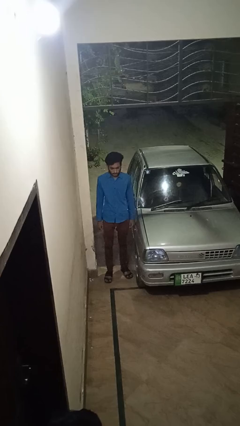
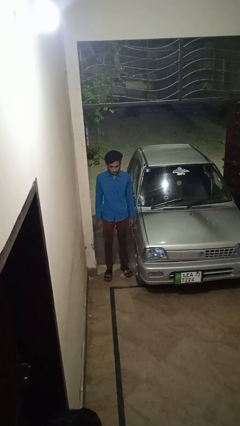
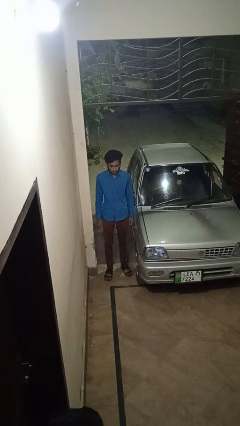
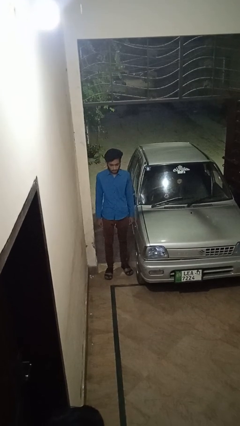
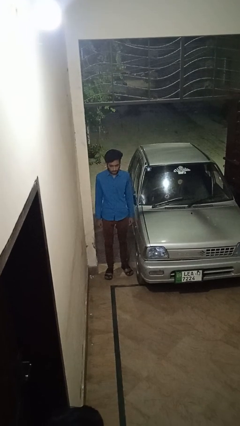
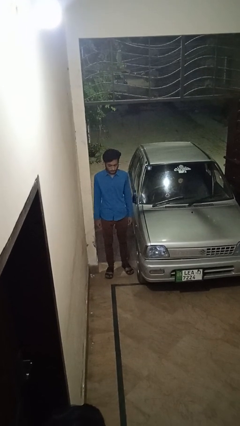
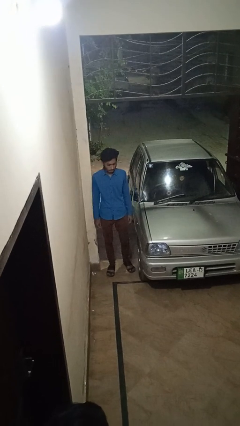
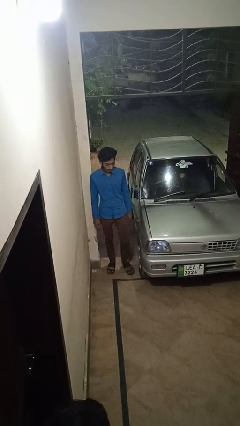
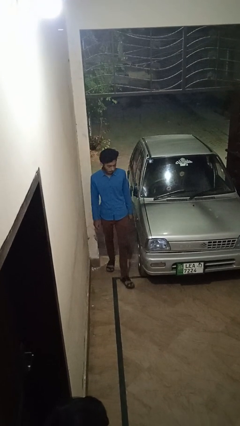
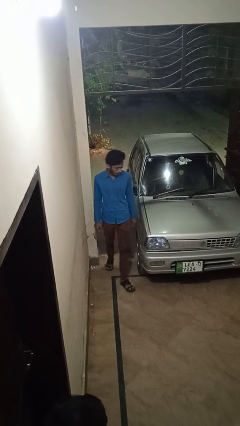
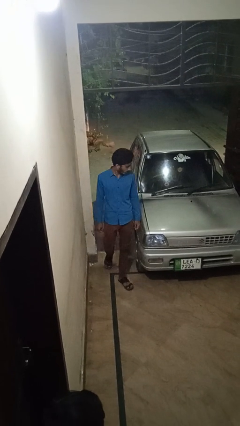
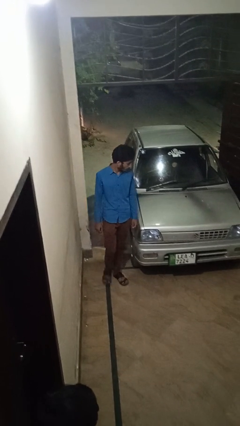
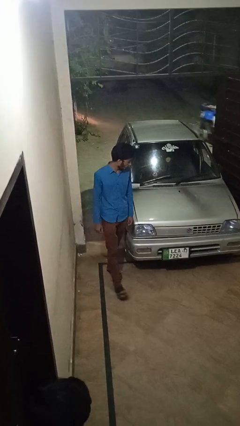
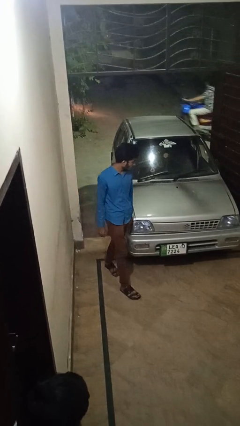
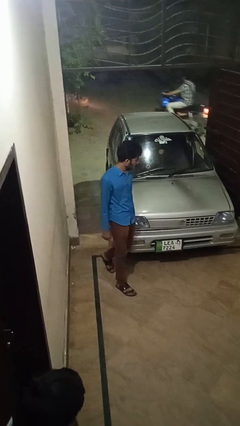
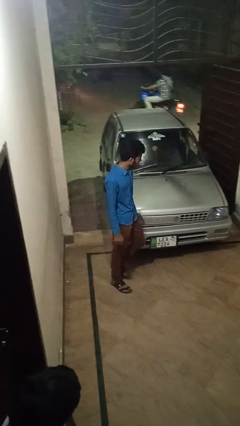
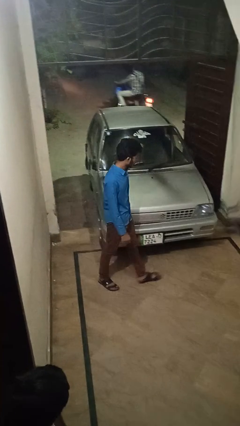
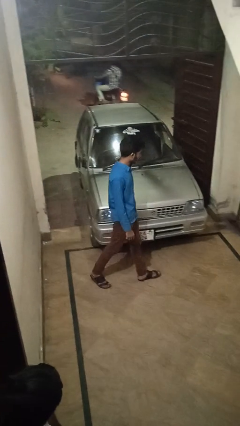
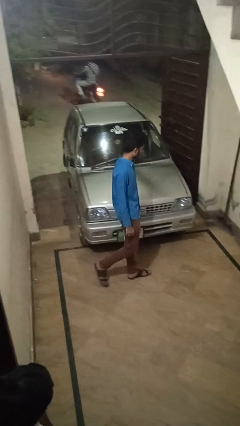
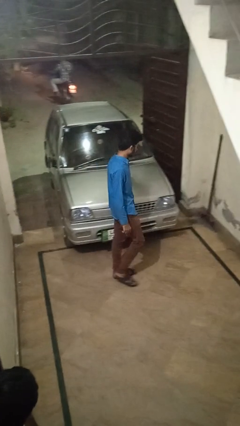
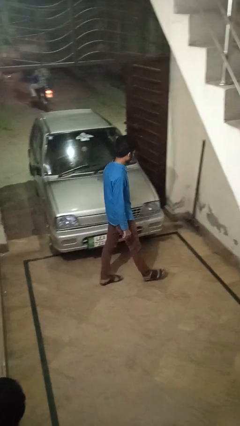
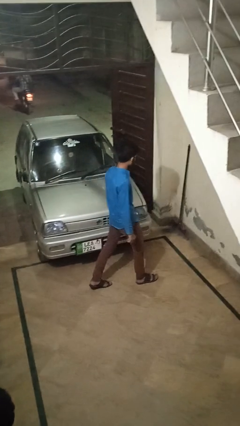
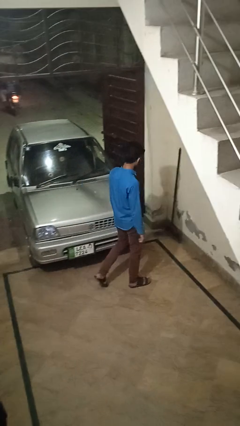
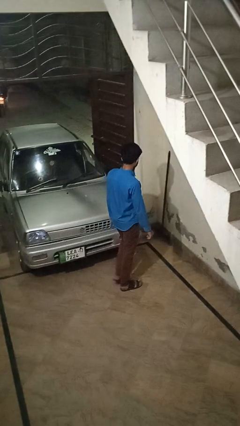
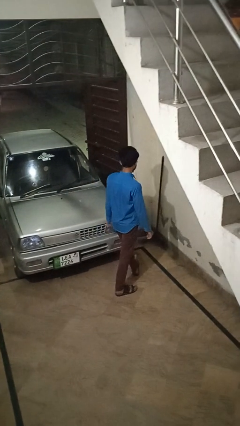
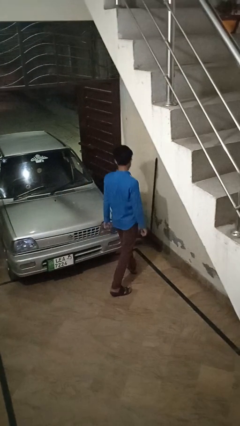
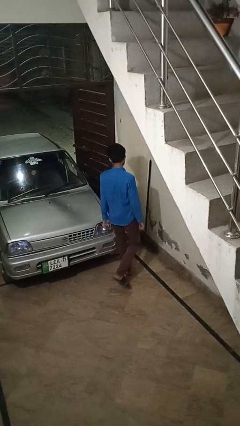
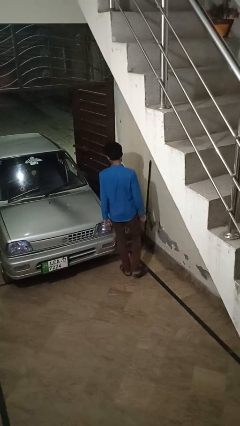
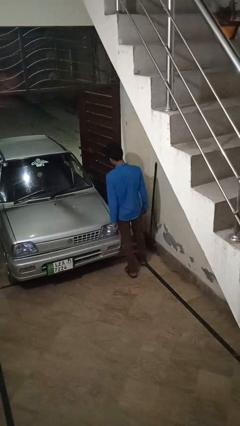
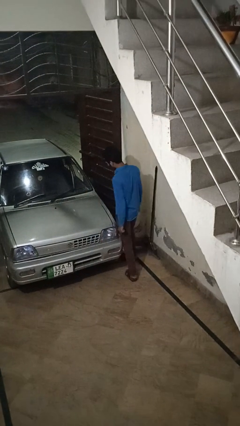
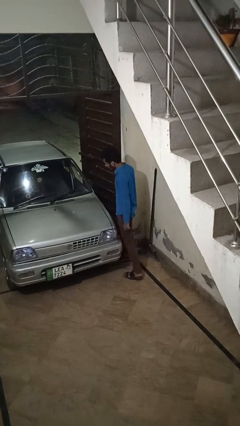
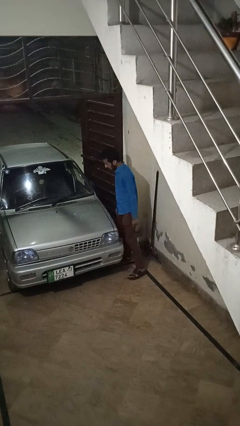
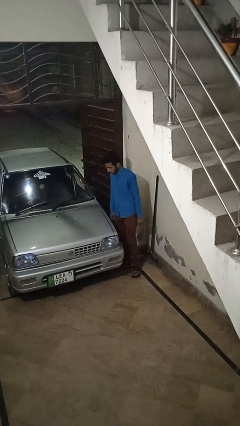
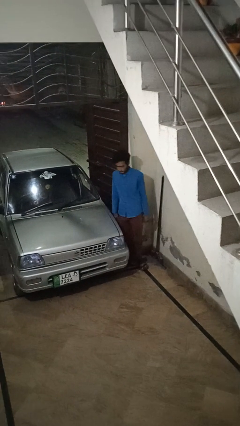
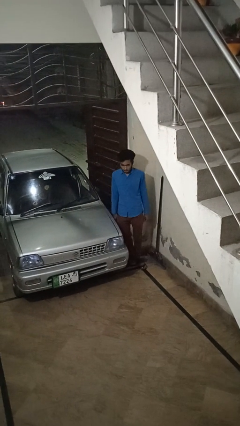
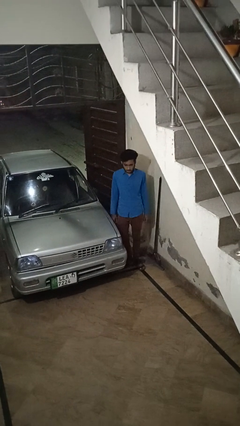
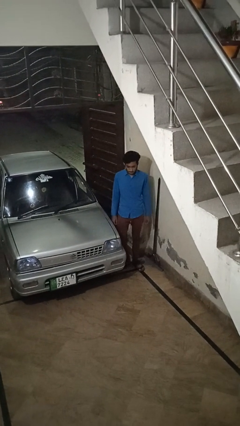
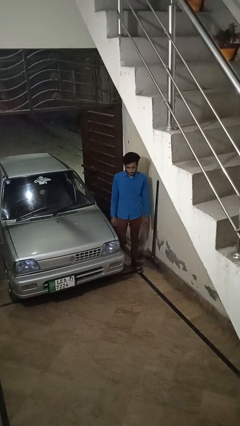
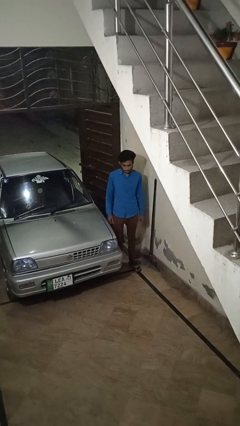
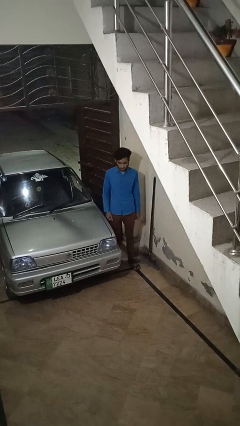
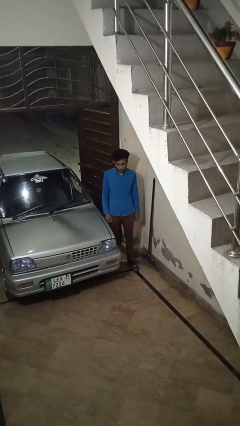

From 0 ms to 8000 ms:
person walks around car

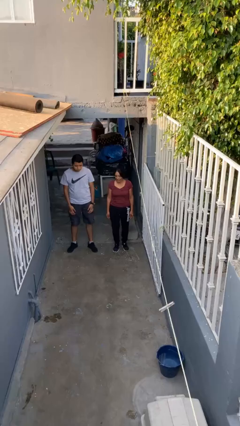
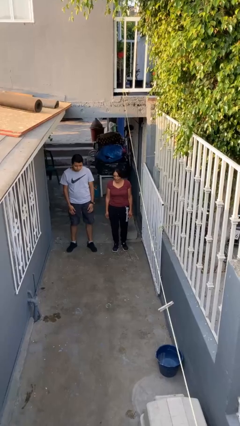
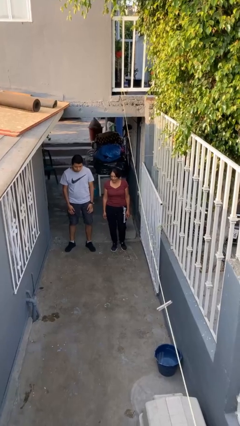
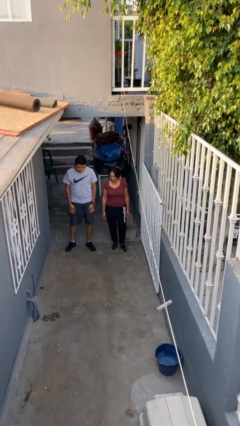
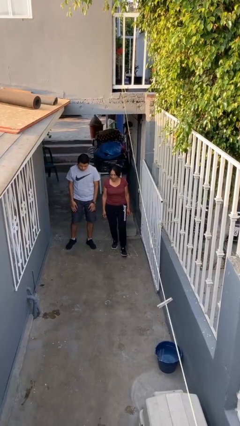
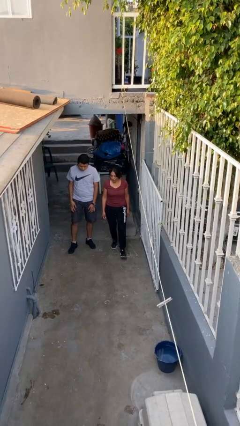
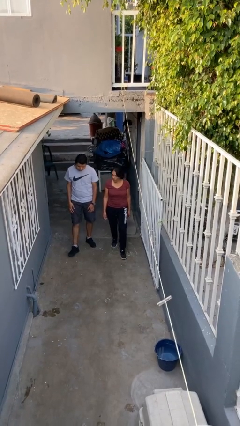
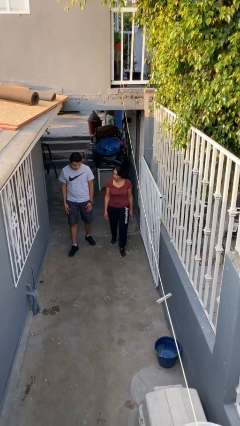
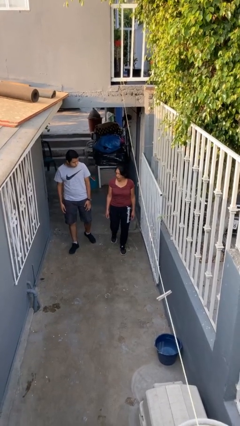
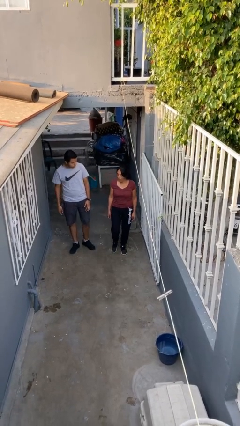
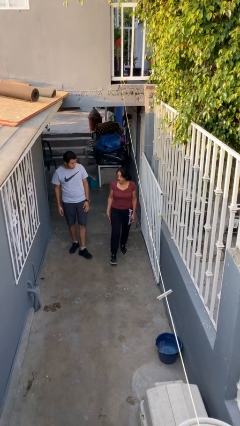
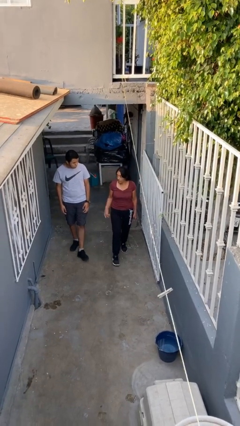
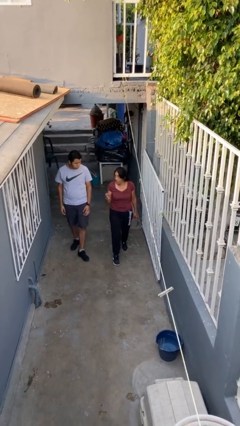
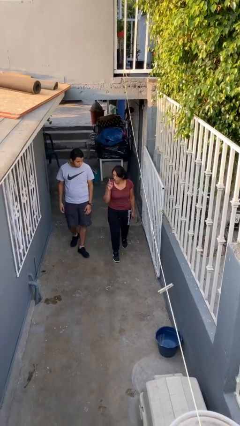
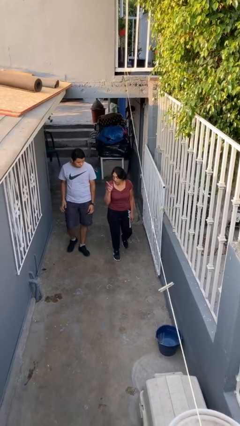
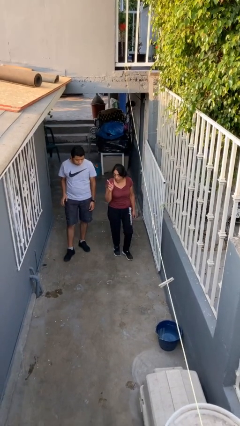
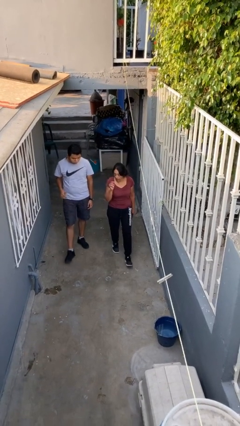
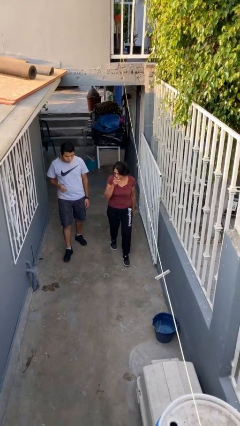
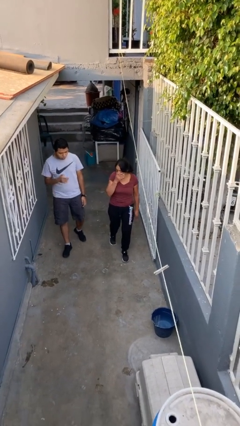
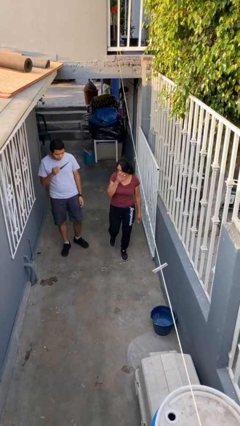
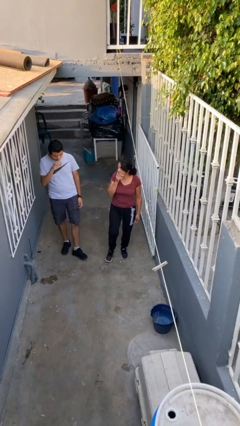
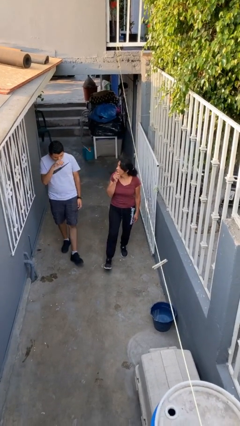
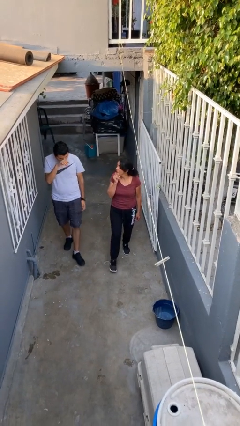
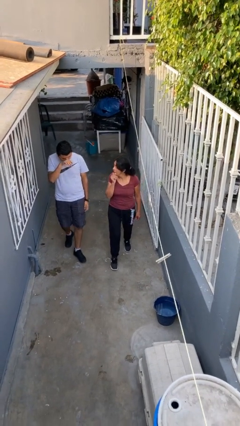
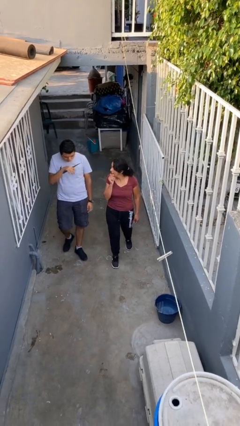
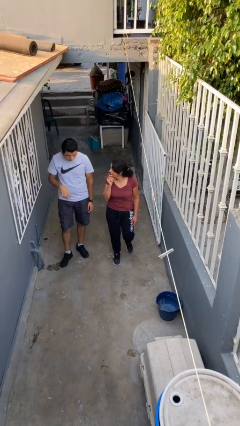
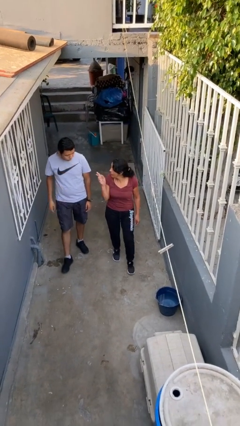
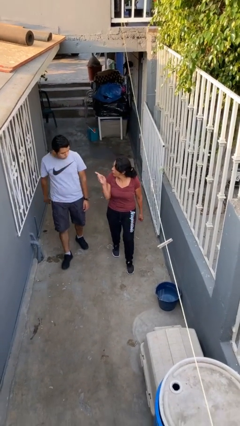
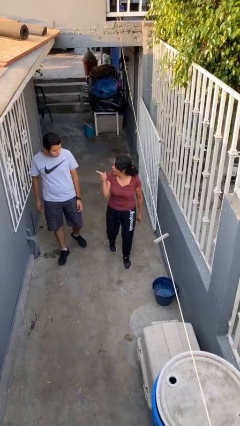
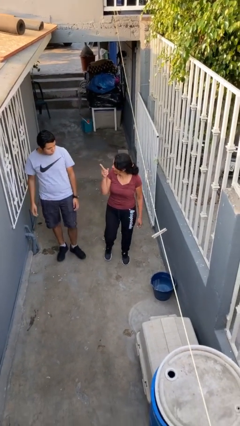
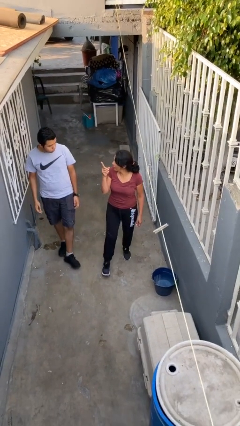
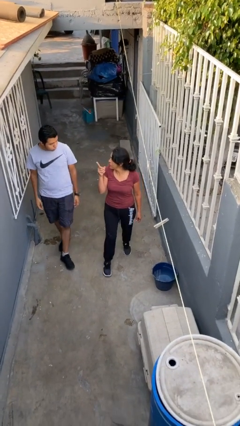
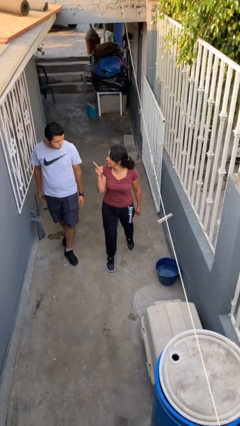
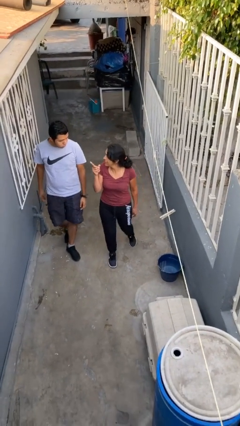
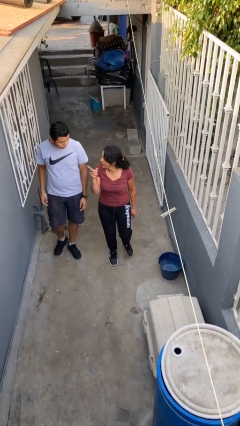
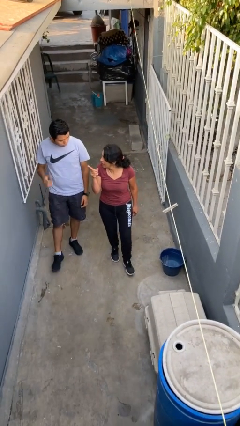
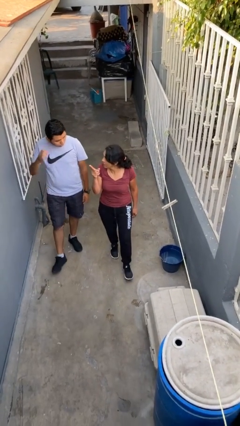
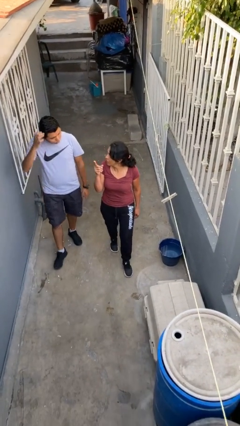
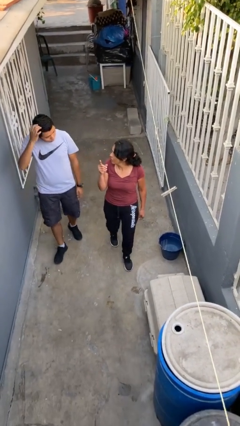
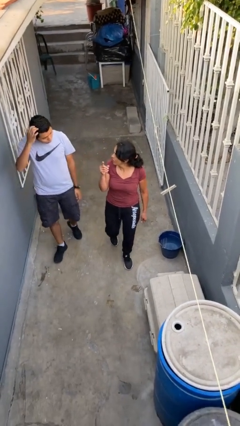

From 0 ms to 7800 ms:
person talks to person

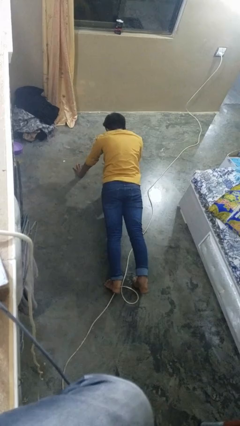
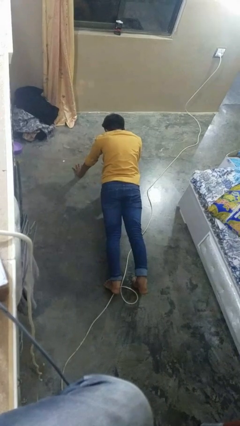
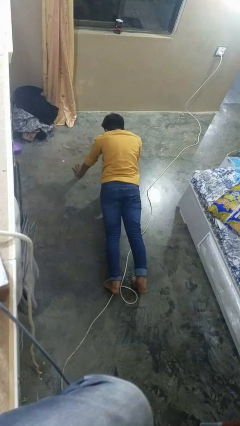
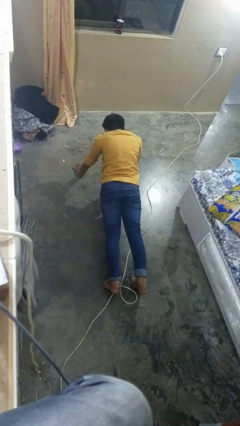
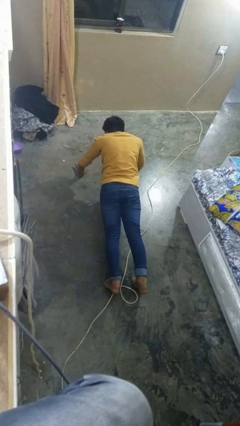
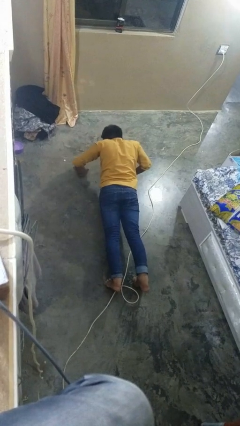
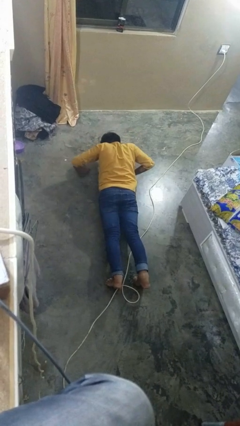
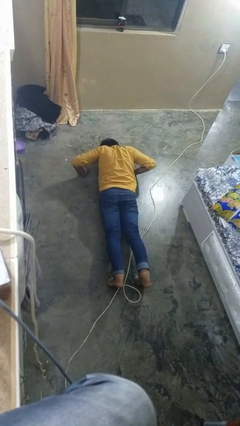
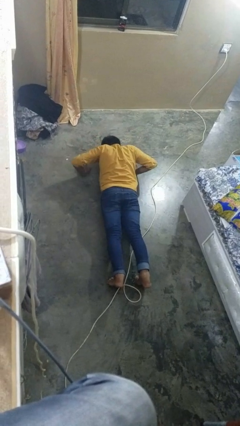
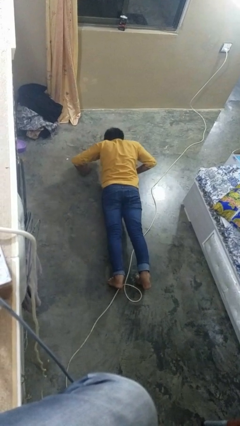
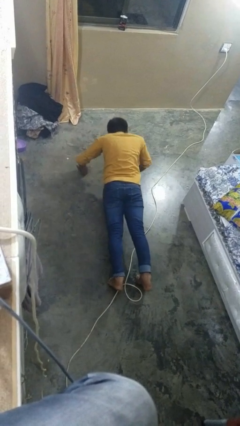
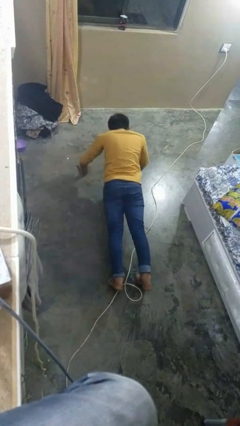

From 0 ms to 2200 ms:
person exercises with pushup
